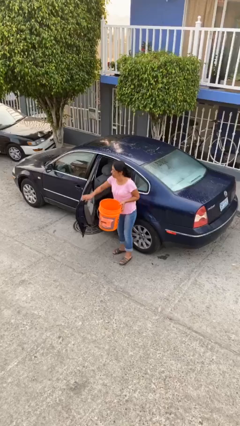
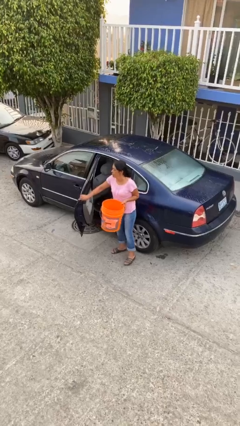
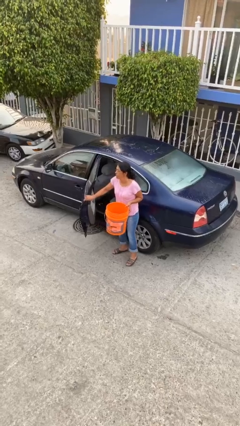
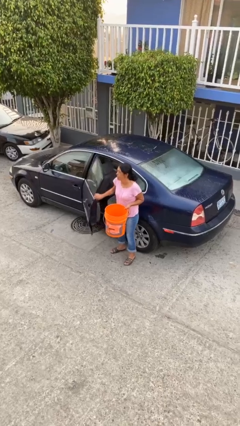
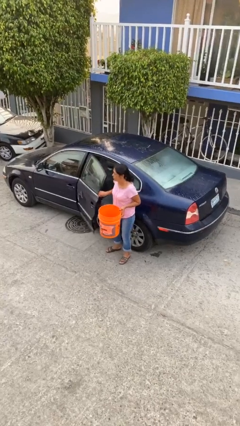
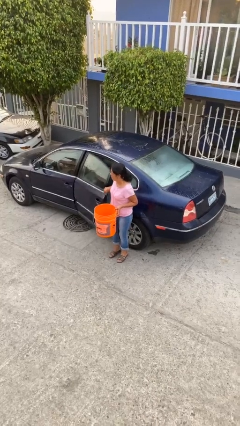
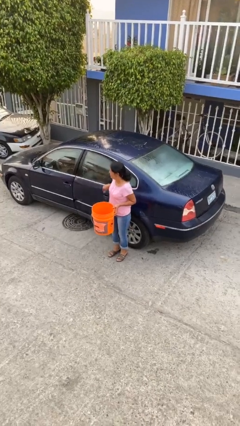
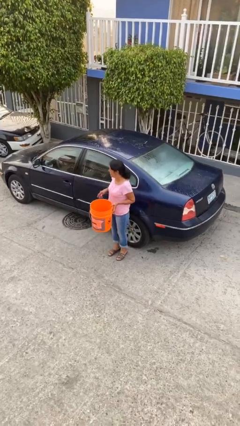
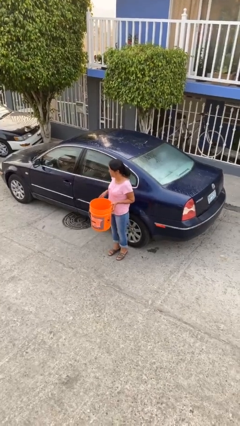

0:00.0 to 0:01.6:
person closes car door

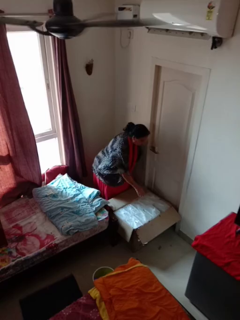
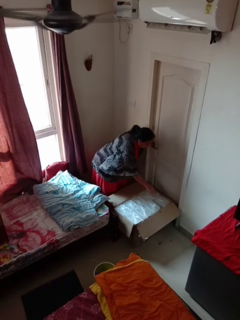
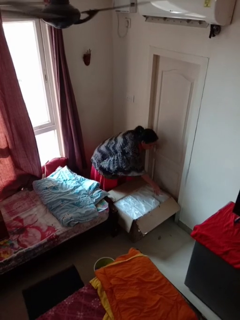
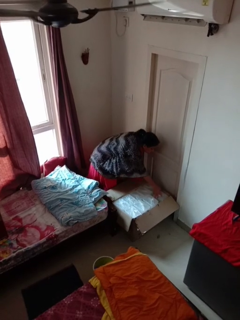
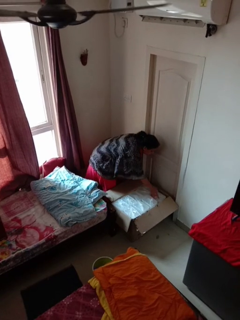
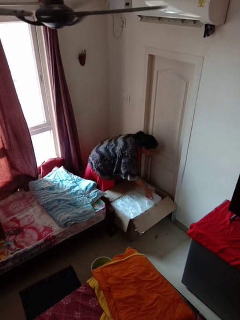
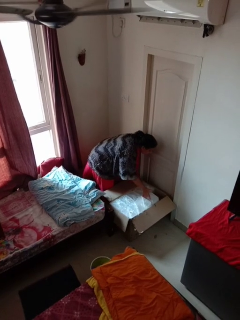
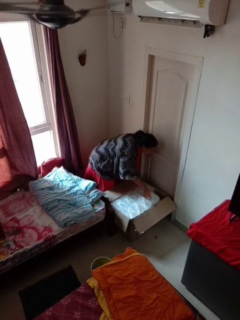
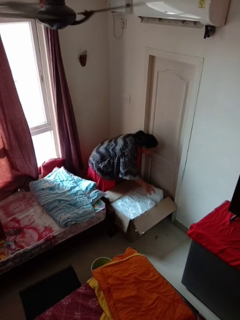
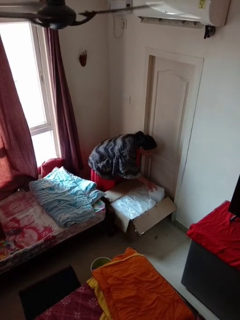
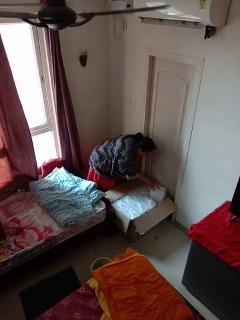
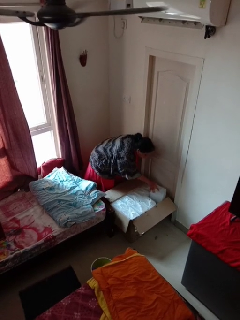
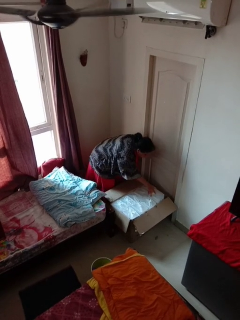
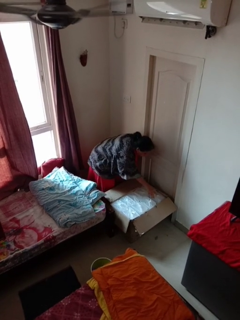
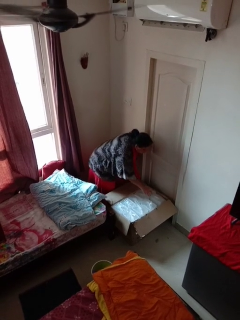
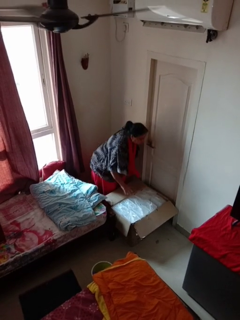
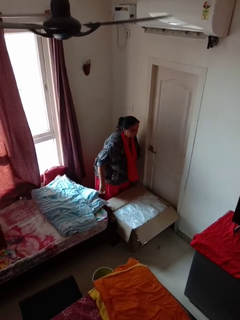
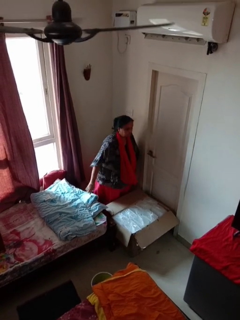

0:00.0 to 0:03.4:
person searches in box

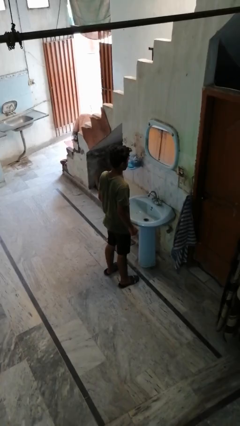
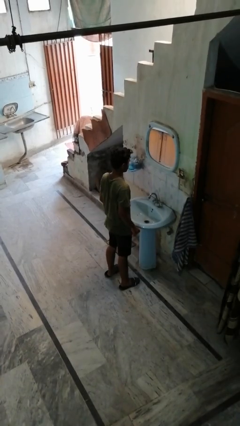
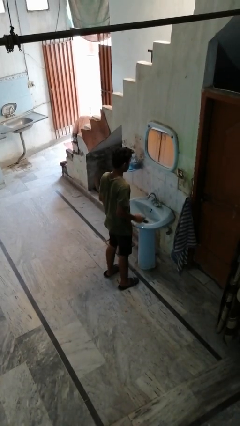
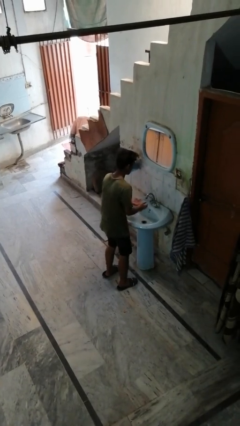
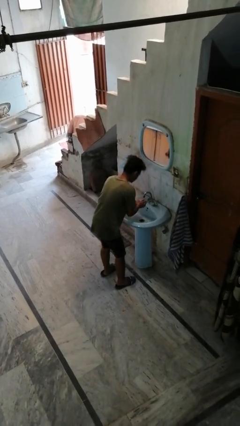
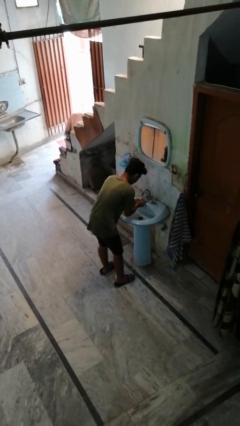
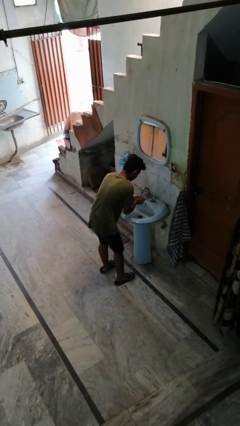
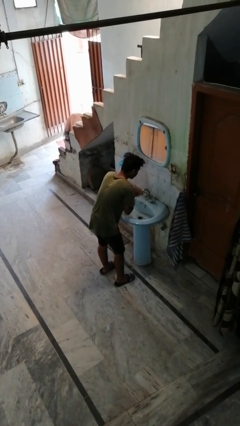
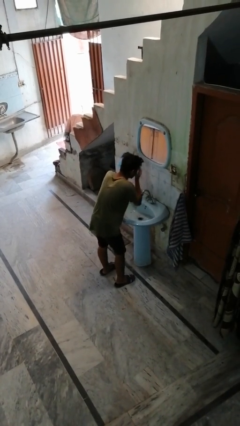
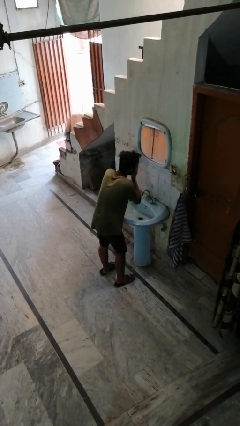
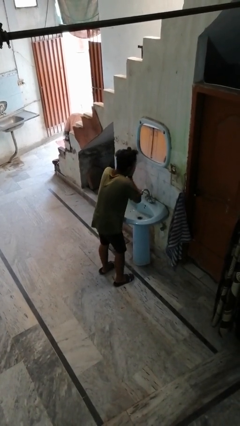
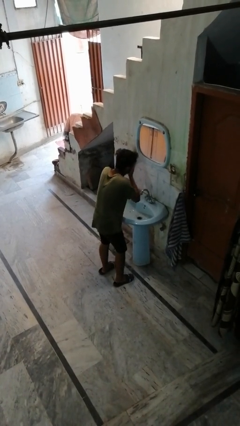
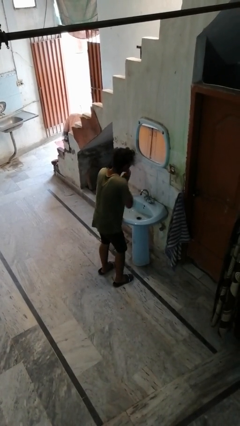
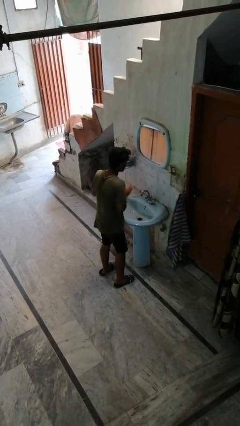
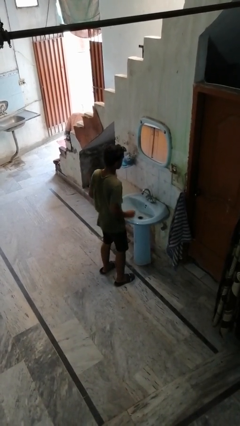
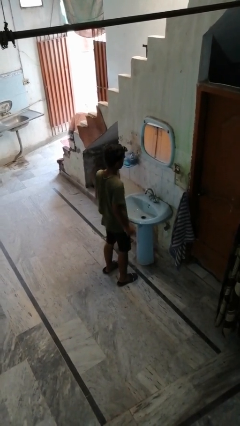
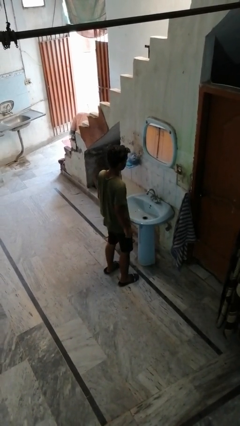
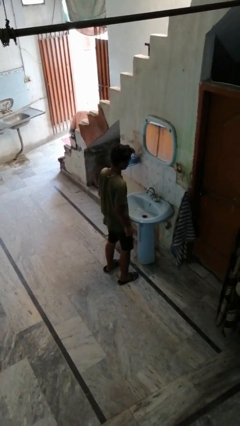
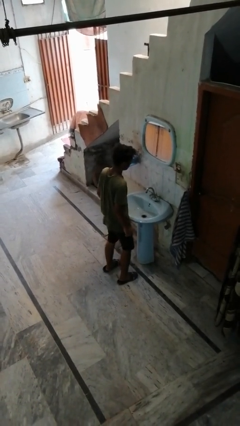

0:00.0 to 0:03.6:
person washes face

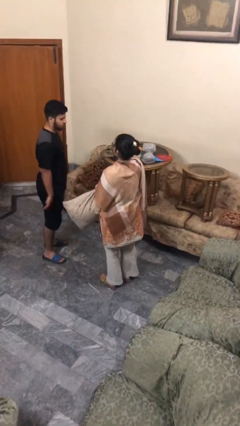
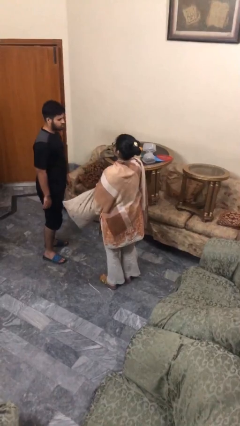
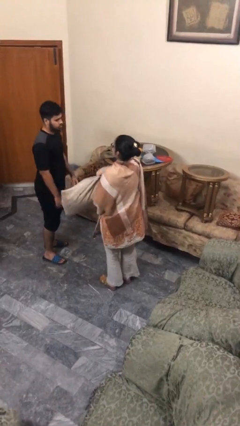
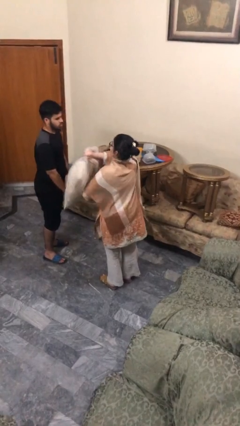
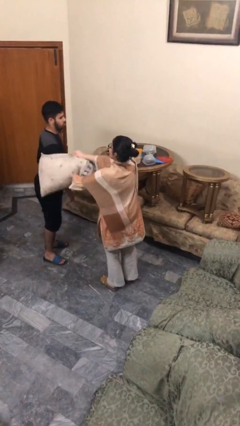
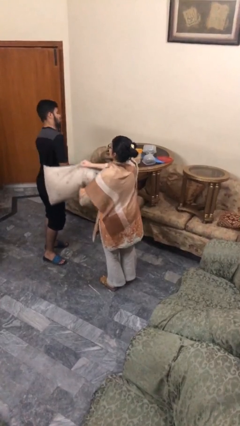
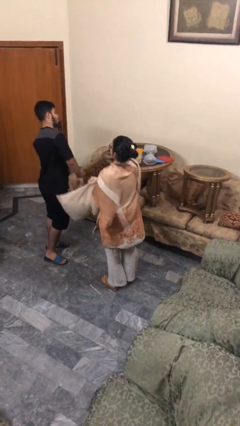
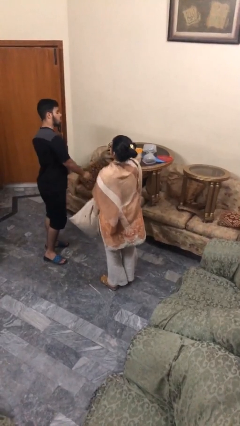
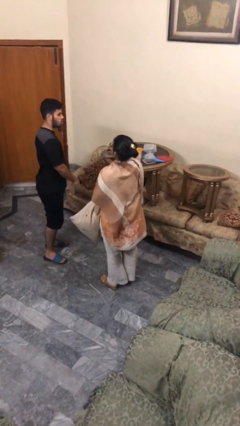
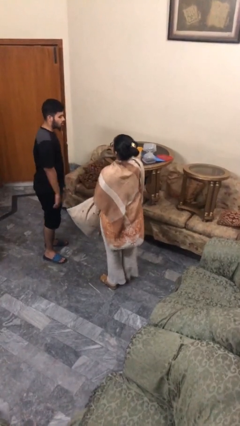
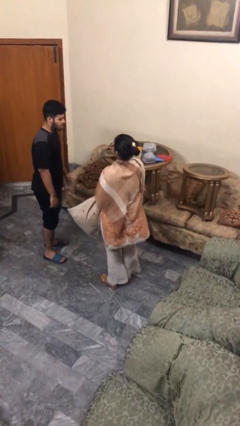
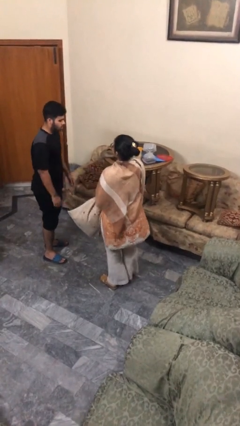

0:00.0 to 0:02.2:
person hits person with pillow

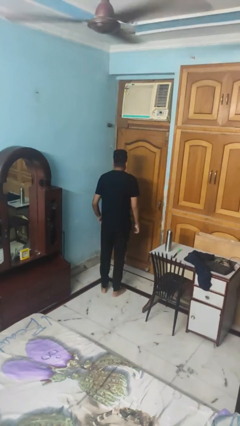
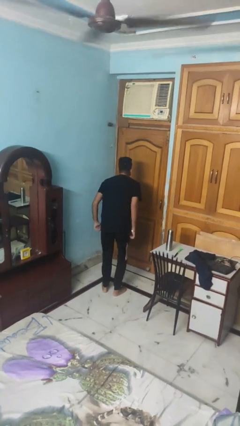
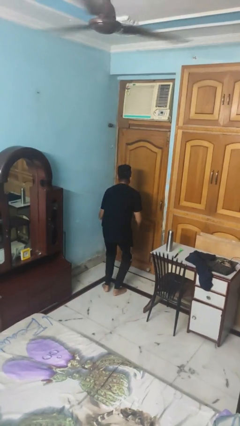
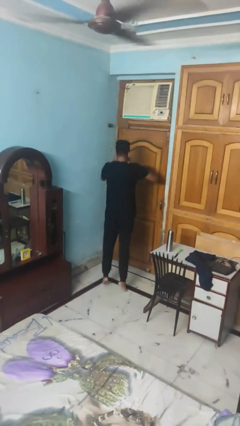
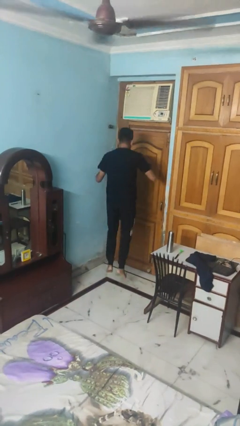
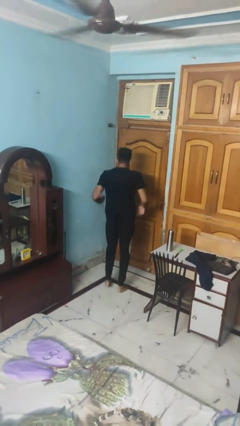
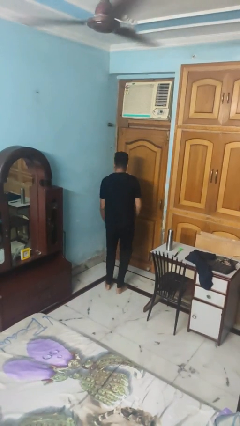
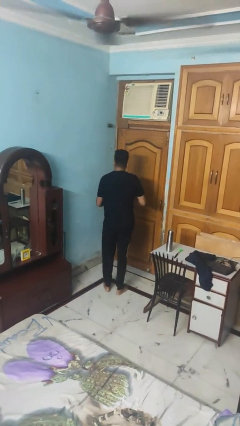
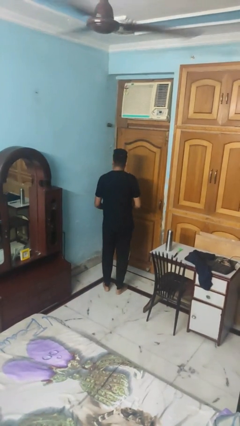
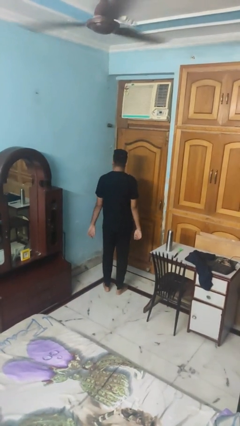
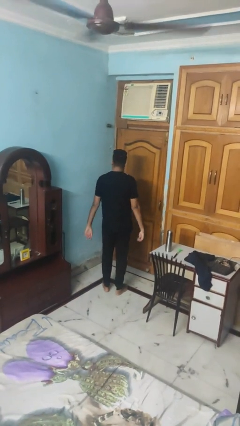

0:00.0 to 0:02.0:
person jumps

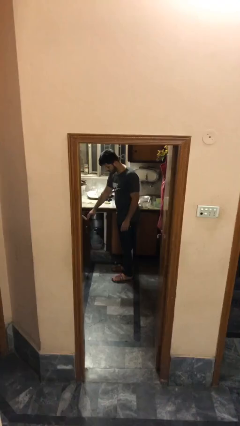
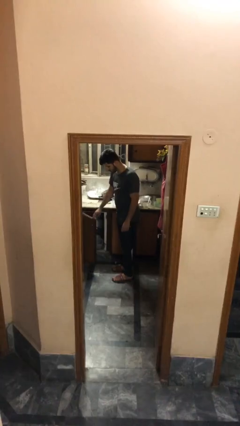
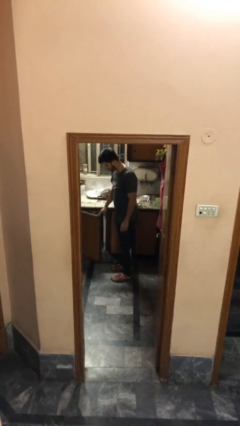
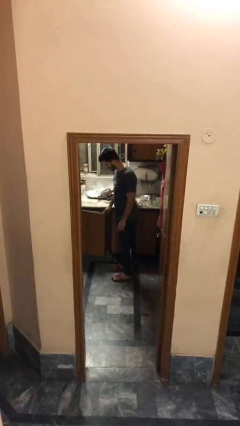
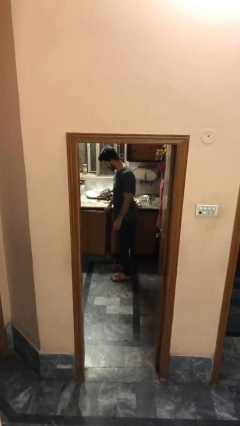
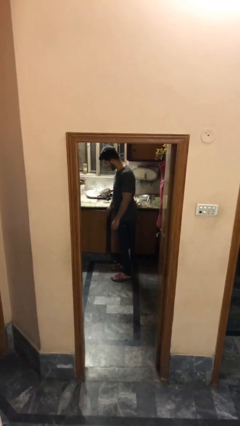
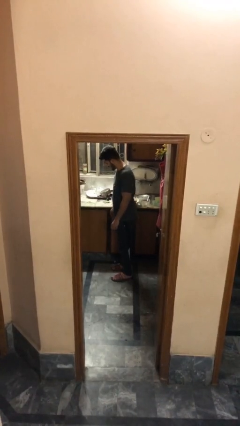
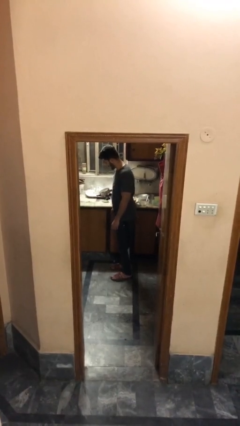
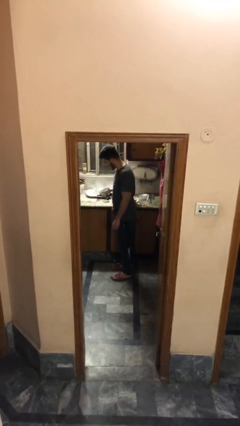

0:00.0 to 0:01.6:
person closes cabinet

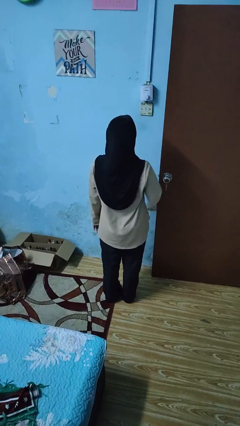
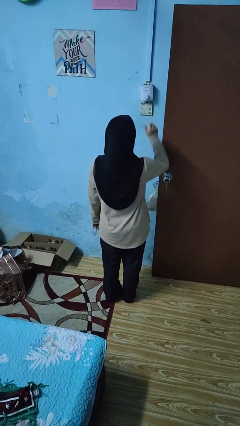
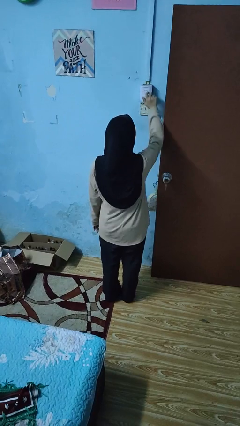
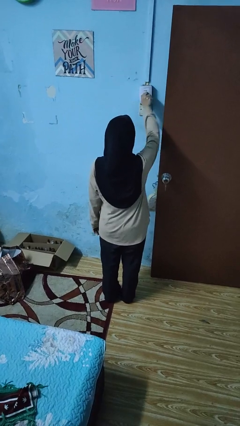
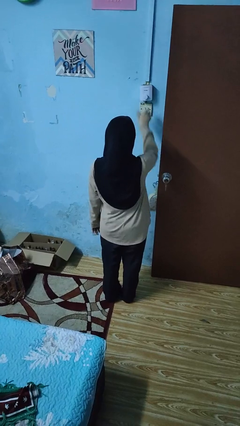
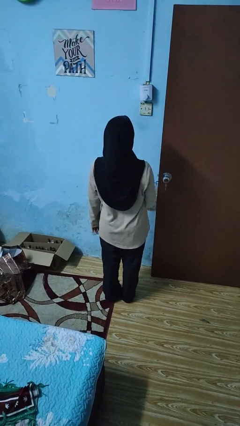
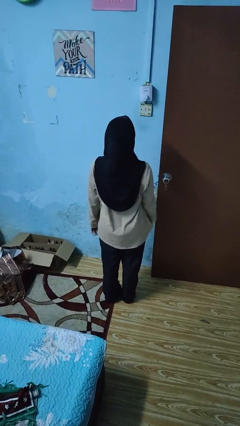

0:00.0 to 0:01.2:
person adjusts thermostat

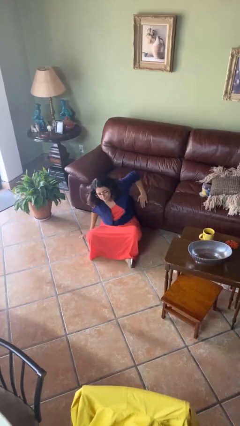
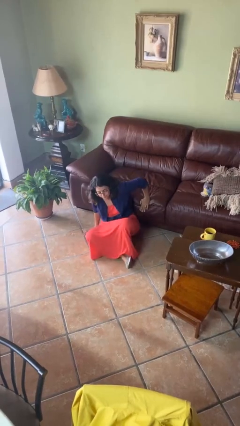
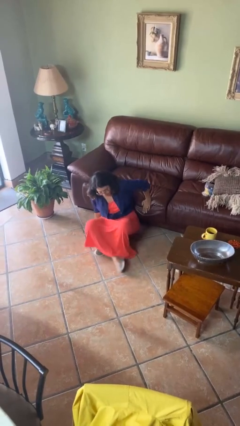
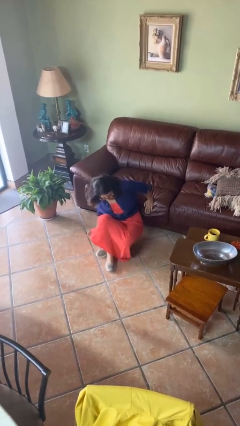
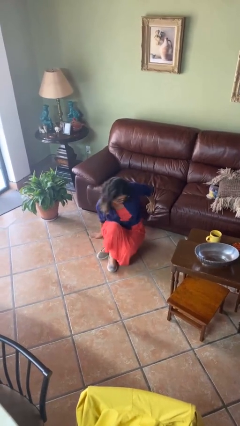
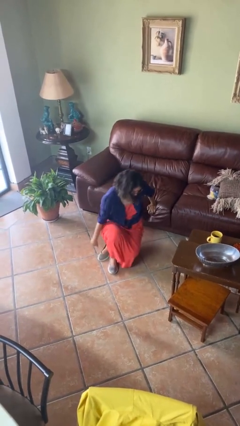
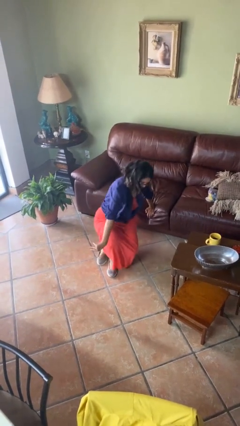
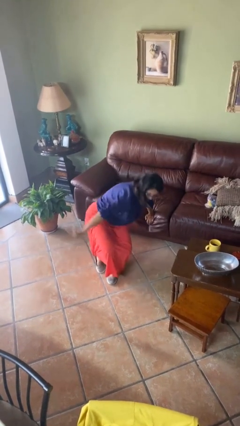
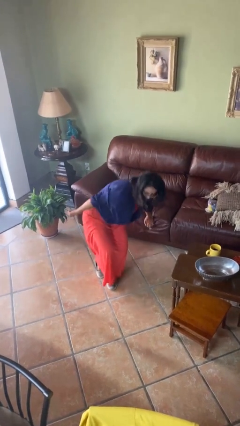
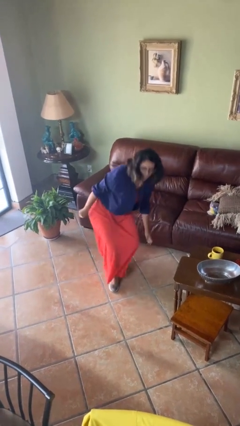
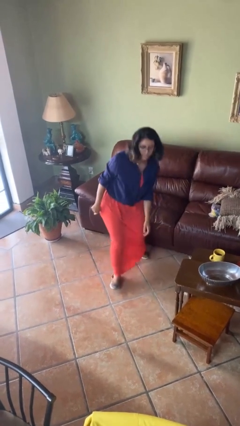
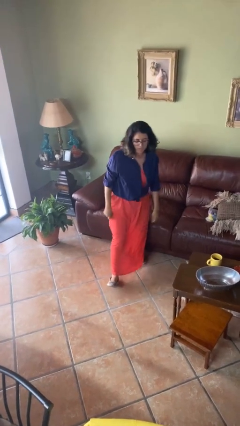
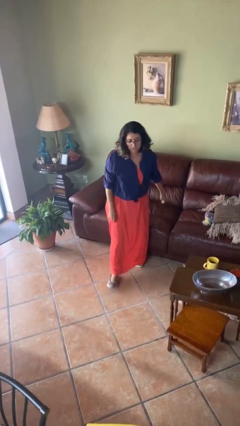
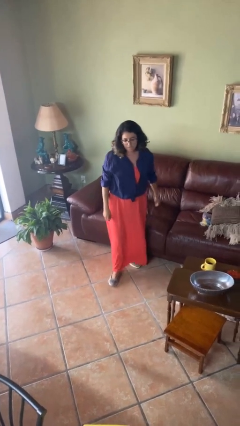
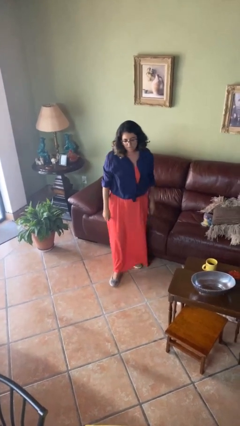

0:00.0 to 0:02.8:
person stands up from floor
